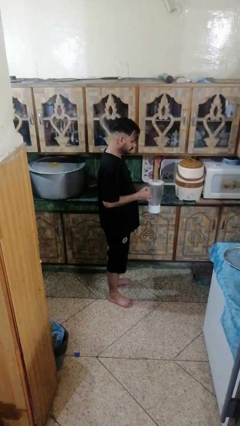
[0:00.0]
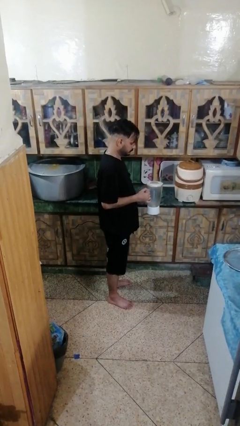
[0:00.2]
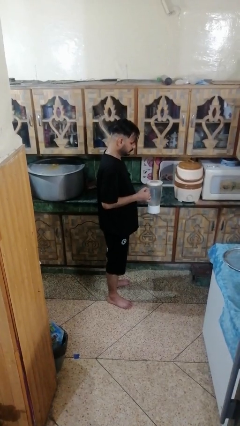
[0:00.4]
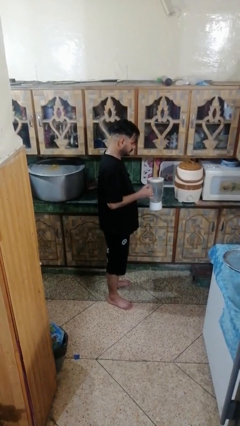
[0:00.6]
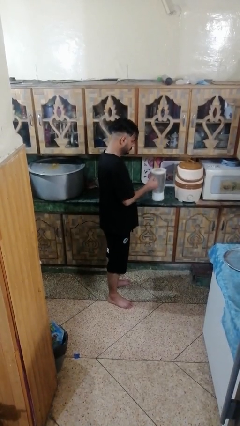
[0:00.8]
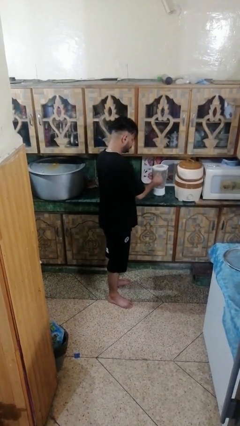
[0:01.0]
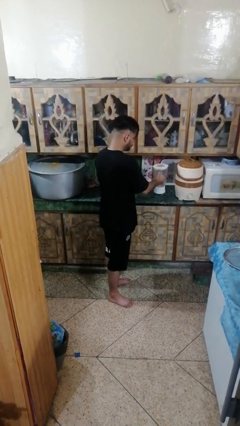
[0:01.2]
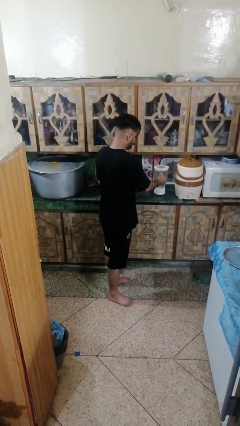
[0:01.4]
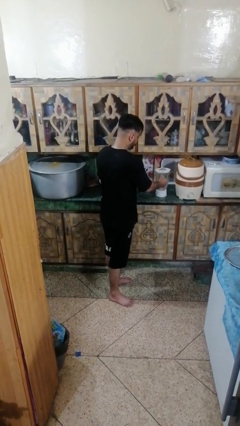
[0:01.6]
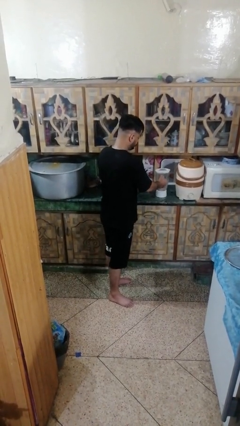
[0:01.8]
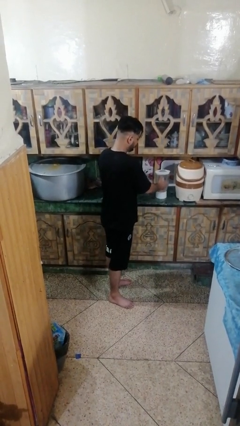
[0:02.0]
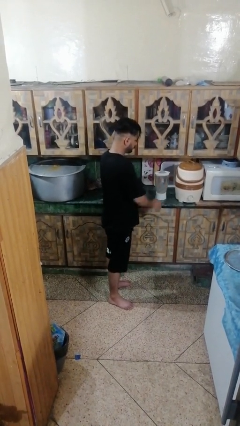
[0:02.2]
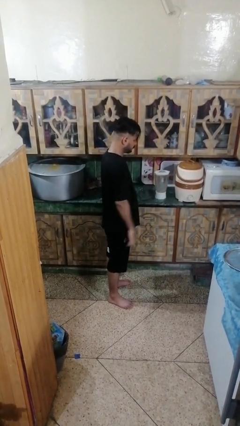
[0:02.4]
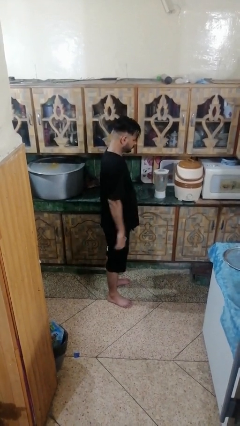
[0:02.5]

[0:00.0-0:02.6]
person puts down object on countertop

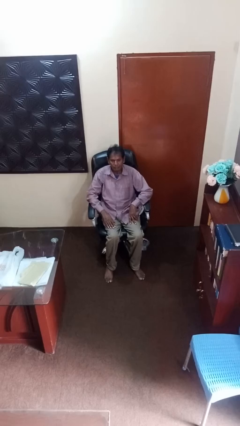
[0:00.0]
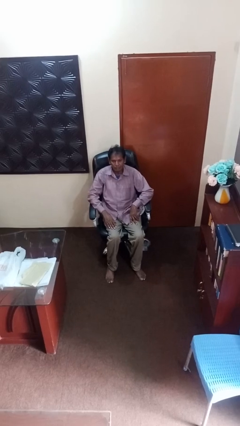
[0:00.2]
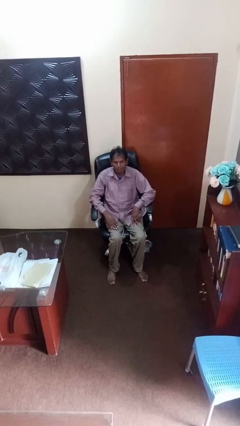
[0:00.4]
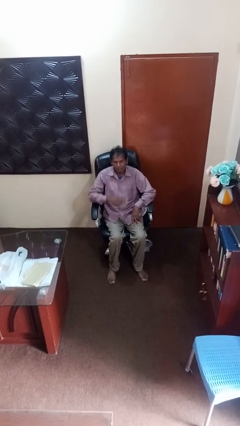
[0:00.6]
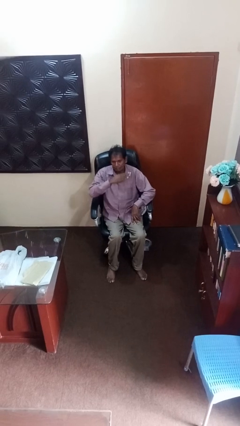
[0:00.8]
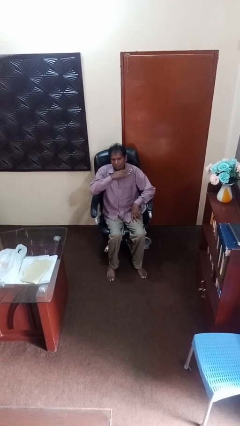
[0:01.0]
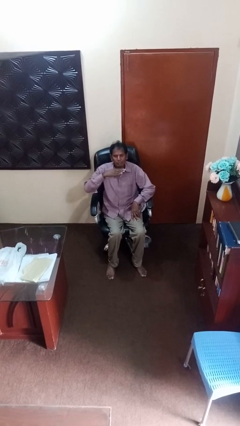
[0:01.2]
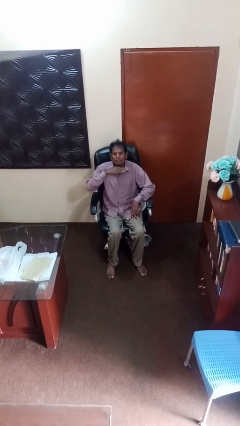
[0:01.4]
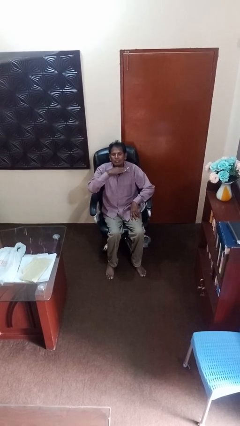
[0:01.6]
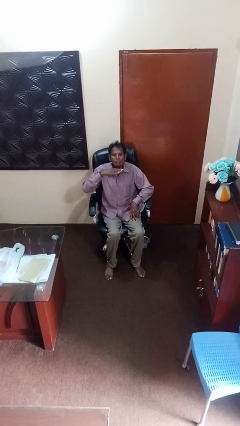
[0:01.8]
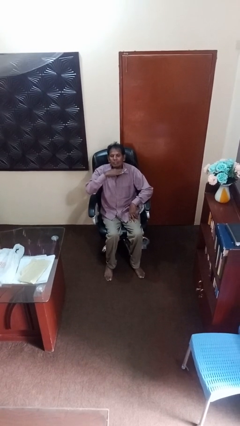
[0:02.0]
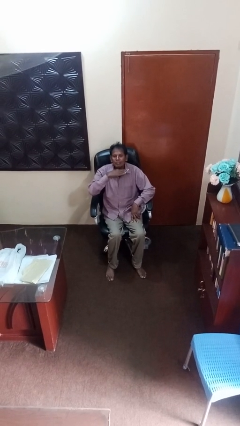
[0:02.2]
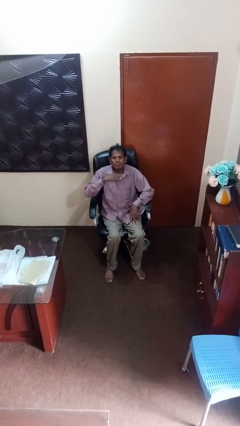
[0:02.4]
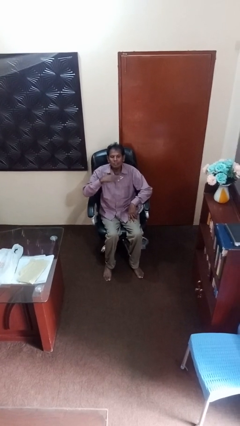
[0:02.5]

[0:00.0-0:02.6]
person gestures cut

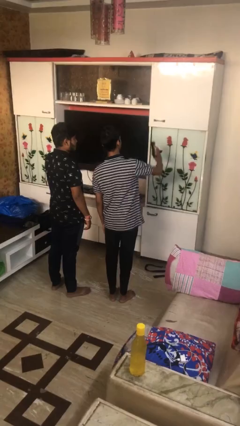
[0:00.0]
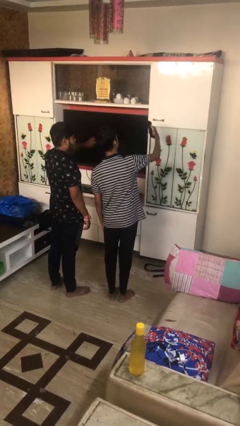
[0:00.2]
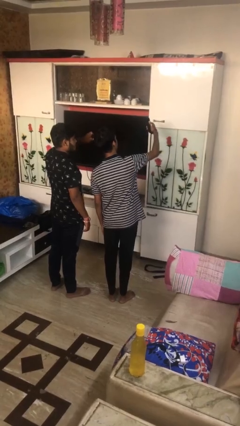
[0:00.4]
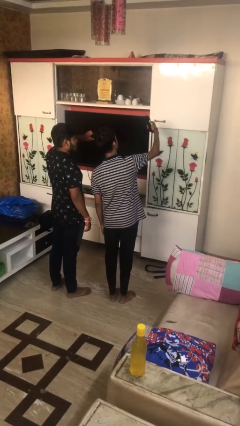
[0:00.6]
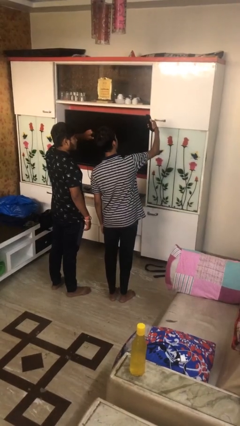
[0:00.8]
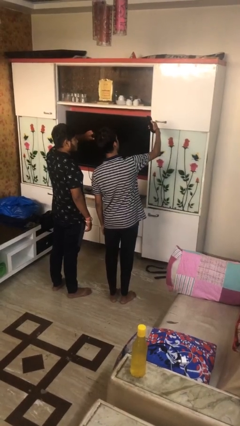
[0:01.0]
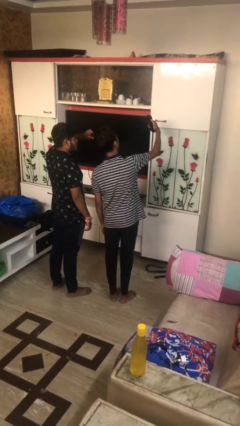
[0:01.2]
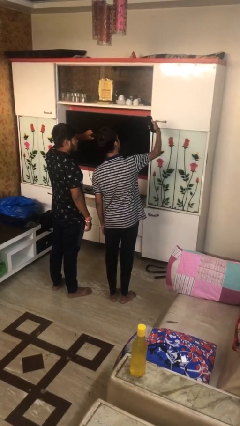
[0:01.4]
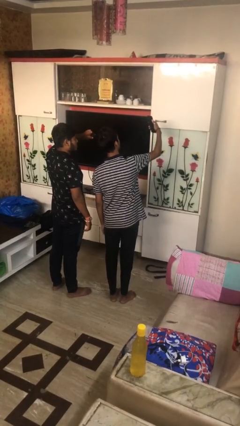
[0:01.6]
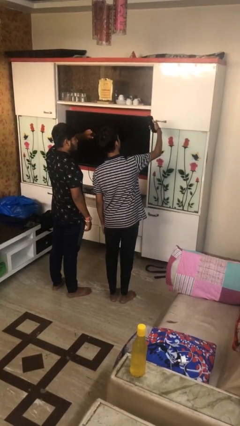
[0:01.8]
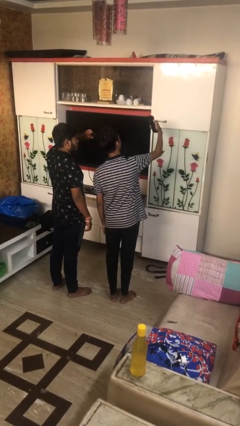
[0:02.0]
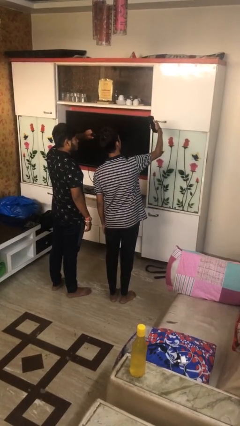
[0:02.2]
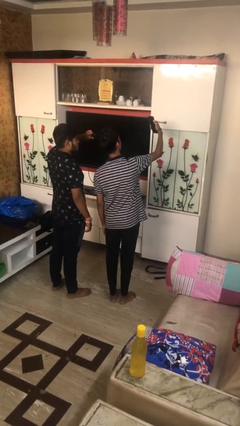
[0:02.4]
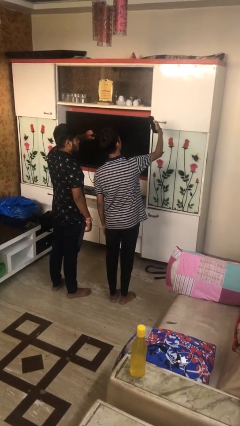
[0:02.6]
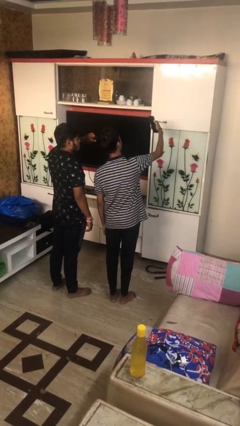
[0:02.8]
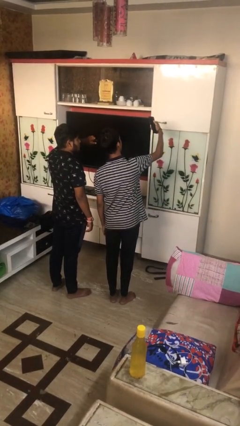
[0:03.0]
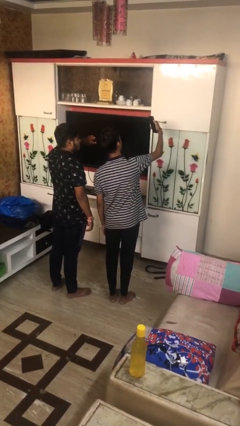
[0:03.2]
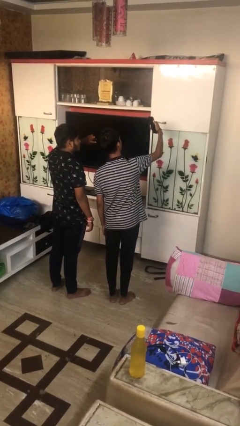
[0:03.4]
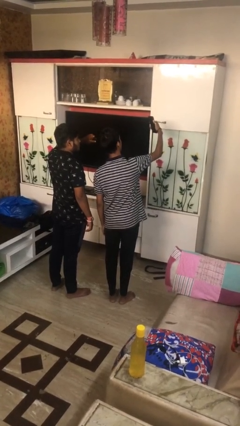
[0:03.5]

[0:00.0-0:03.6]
person takes selfie with person

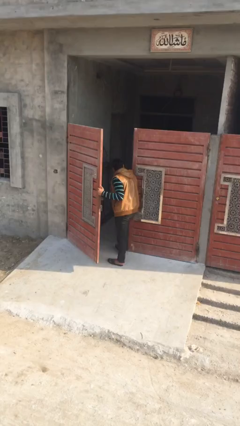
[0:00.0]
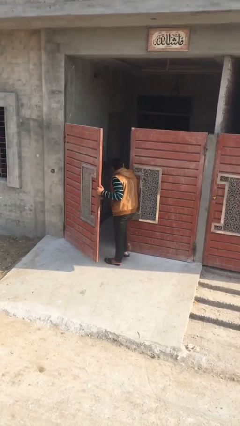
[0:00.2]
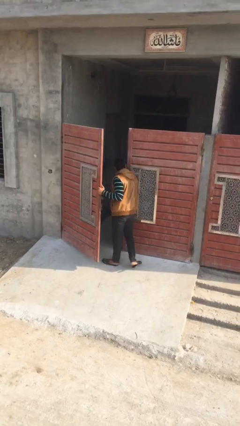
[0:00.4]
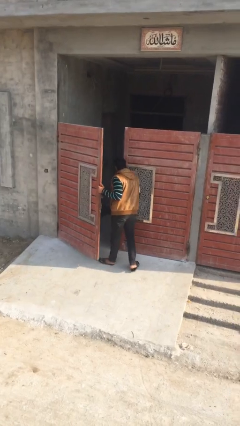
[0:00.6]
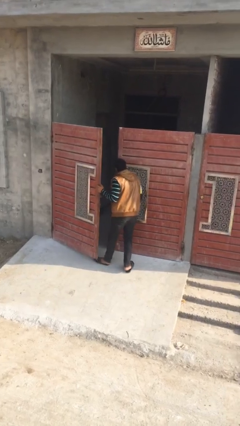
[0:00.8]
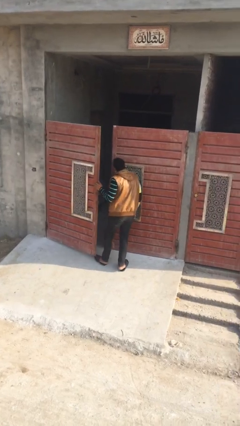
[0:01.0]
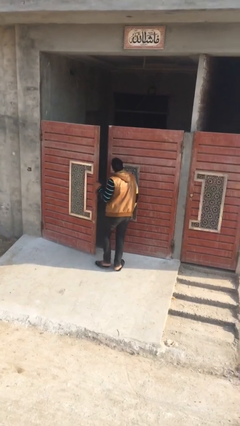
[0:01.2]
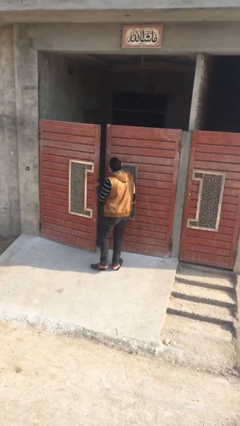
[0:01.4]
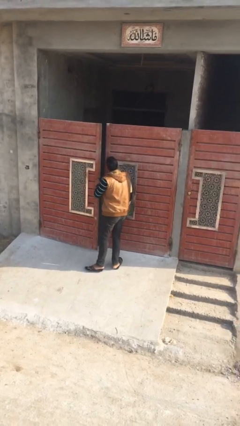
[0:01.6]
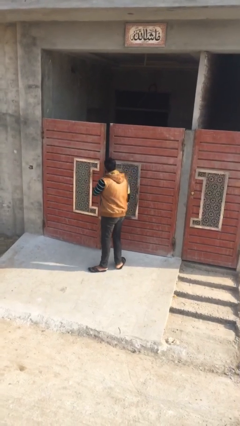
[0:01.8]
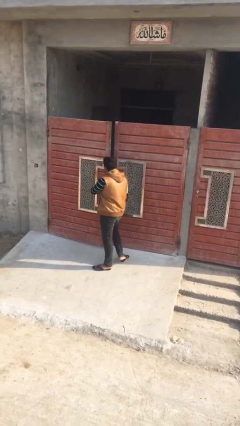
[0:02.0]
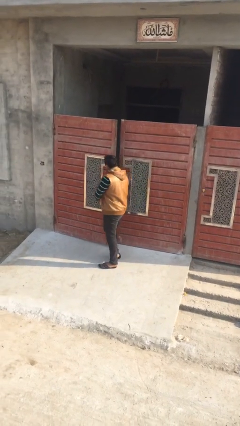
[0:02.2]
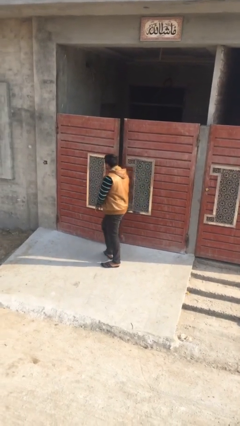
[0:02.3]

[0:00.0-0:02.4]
person closes facility door

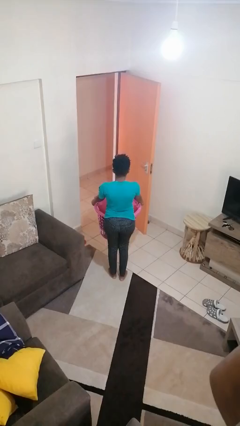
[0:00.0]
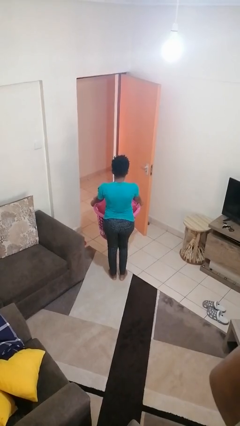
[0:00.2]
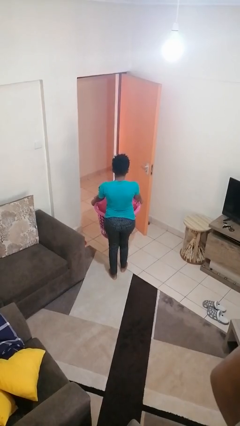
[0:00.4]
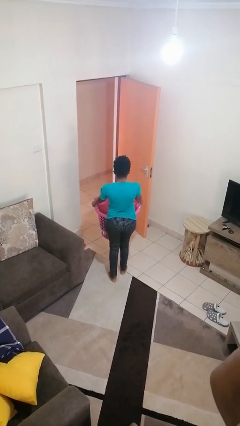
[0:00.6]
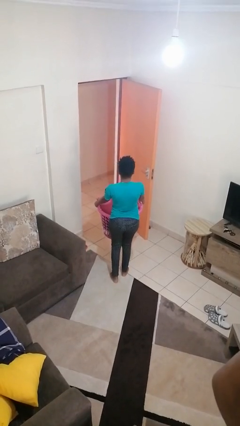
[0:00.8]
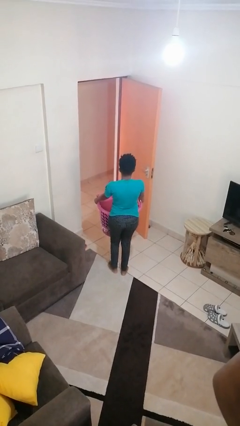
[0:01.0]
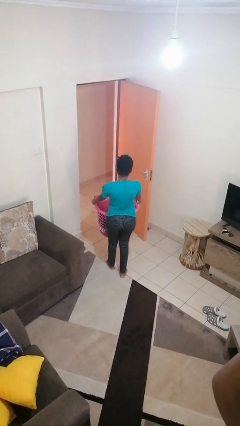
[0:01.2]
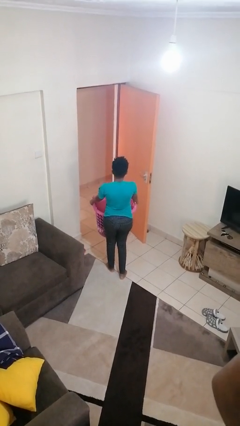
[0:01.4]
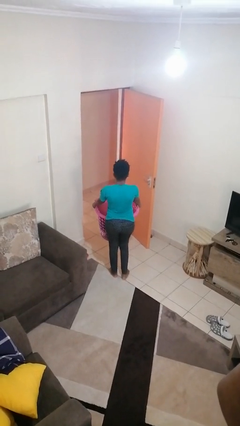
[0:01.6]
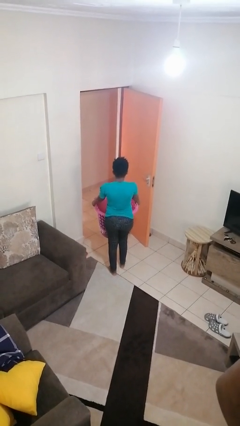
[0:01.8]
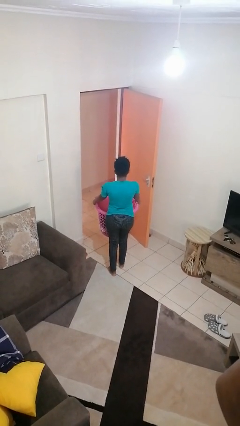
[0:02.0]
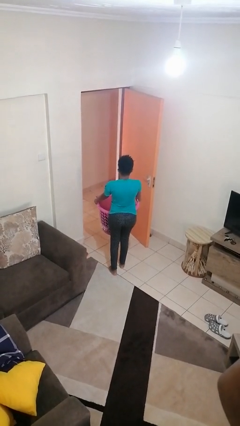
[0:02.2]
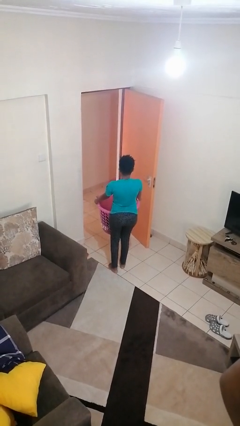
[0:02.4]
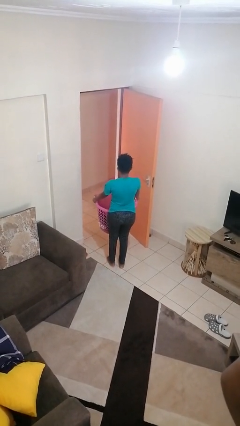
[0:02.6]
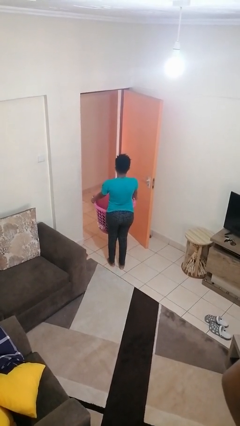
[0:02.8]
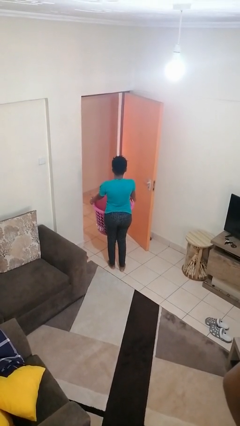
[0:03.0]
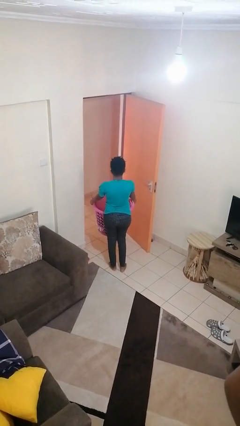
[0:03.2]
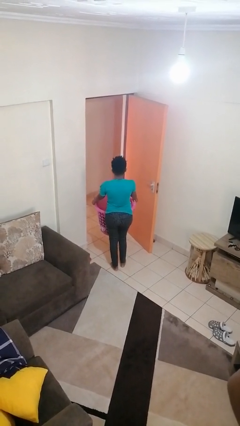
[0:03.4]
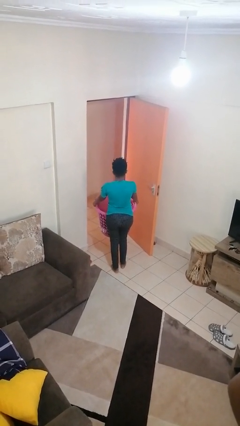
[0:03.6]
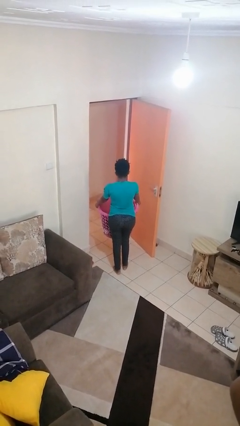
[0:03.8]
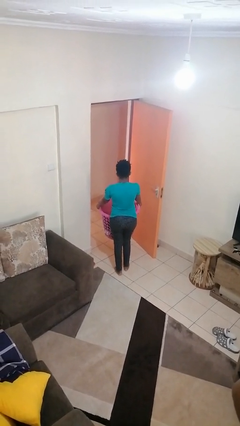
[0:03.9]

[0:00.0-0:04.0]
person carries laundry basket

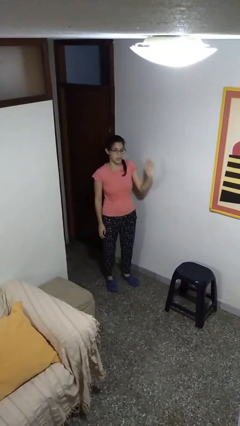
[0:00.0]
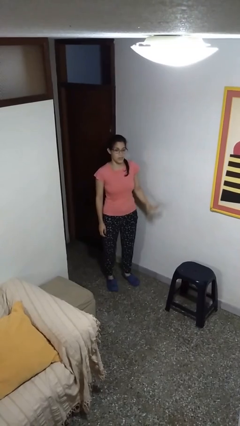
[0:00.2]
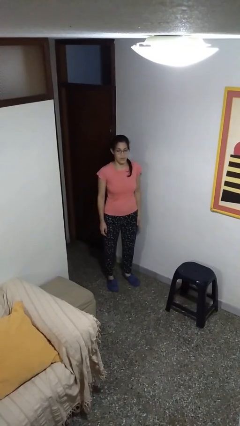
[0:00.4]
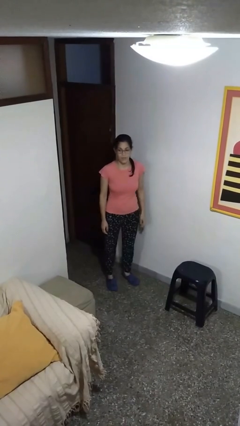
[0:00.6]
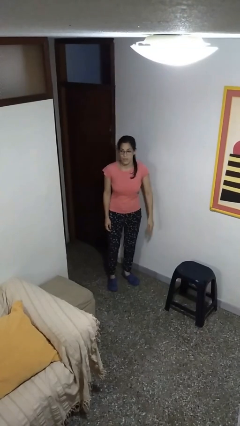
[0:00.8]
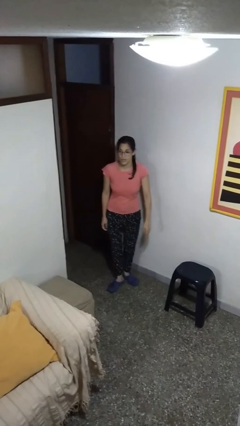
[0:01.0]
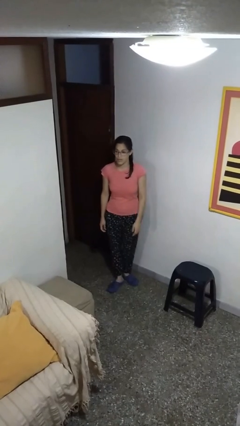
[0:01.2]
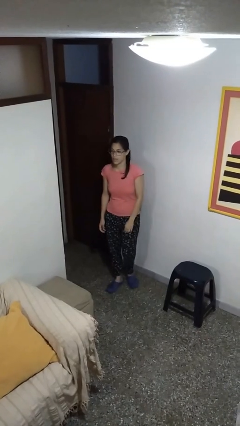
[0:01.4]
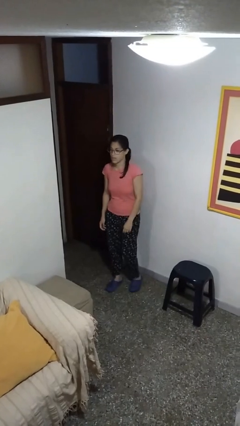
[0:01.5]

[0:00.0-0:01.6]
person gestures lower hand

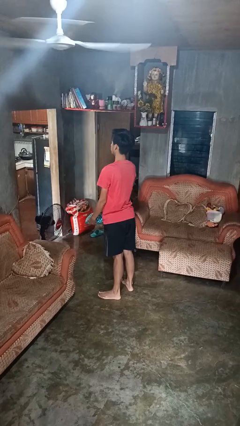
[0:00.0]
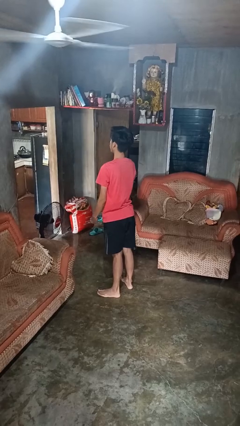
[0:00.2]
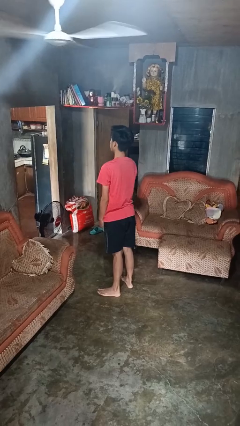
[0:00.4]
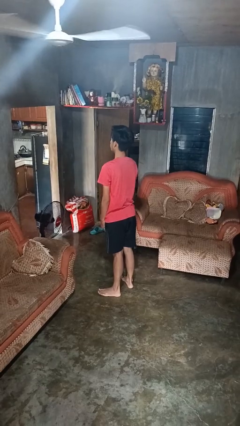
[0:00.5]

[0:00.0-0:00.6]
person catches dropped object

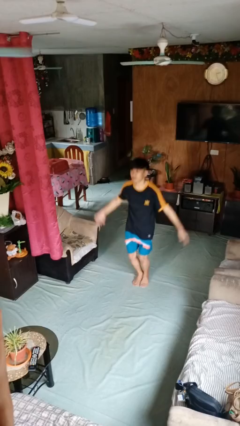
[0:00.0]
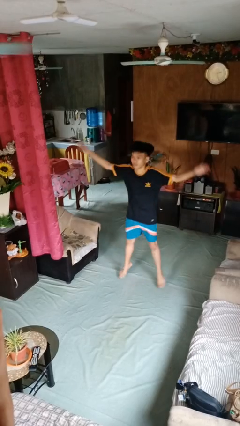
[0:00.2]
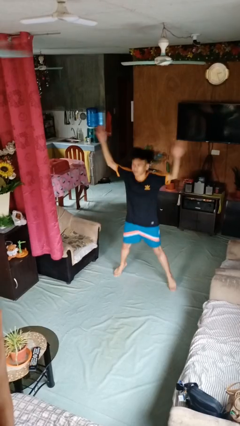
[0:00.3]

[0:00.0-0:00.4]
person exercises with jumping jacks
